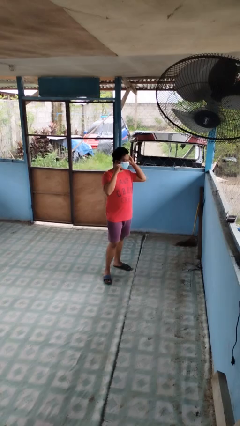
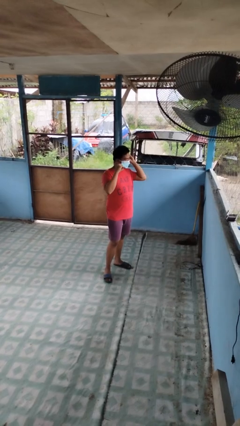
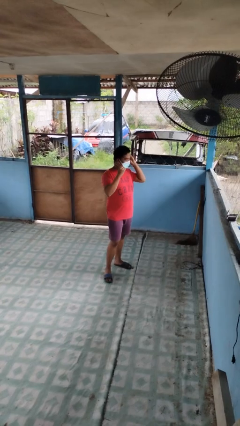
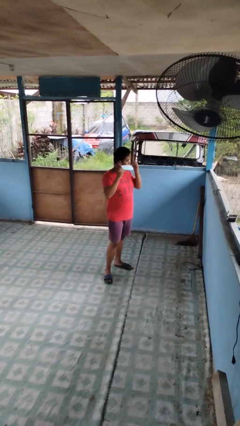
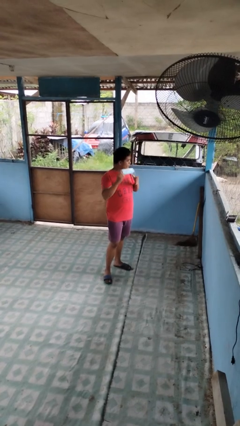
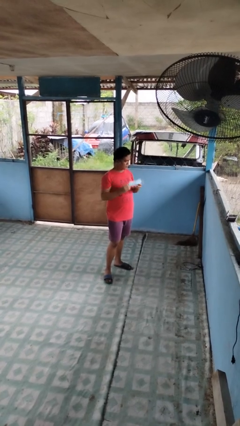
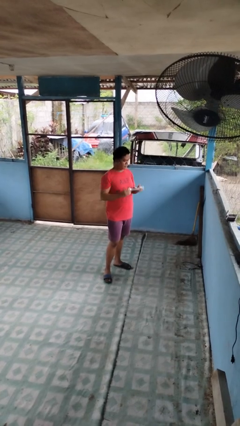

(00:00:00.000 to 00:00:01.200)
person takes off facemask

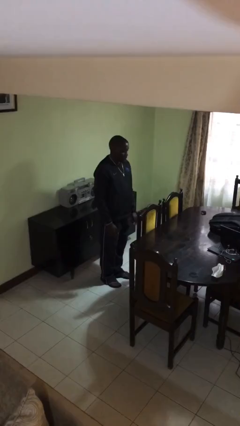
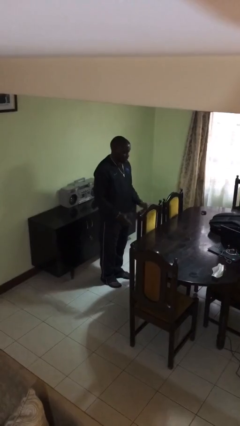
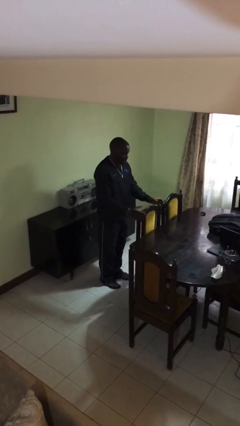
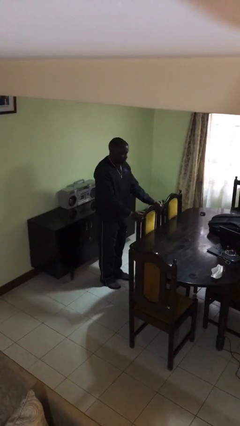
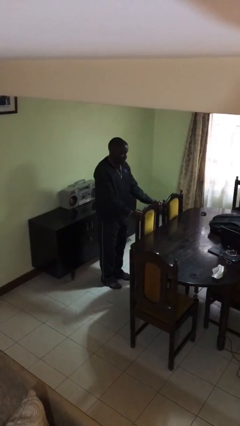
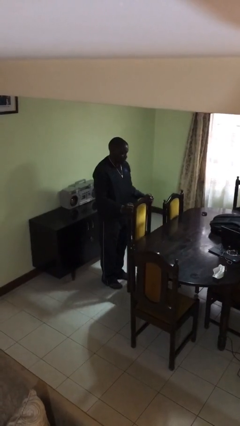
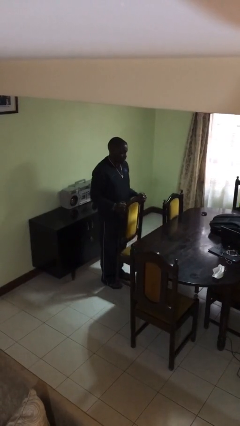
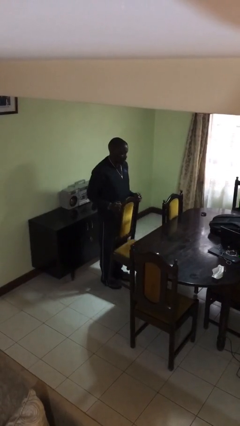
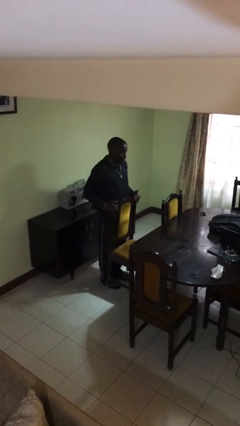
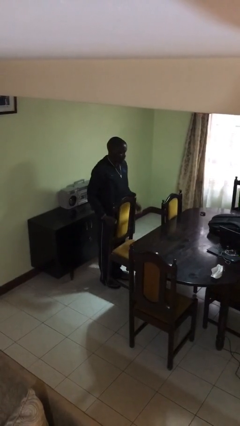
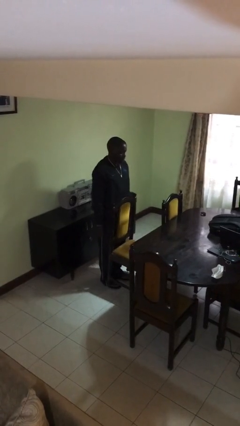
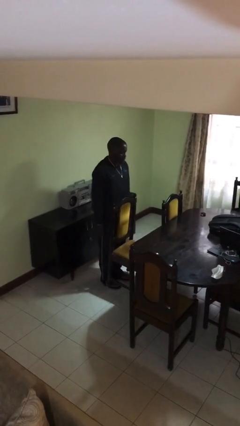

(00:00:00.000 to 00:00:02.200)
person pulls out chair

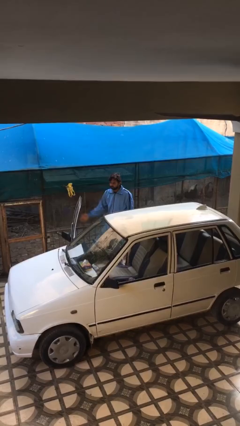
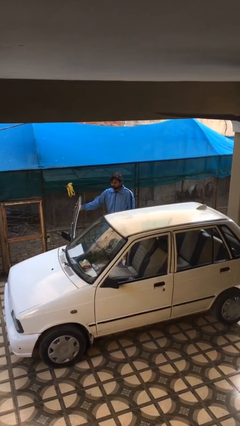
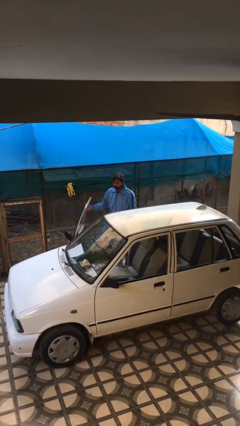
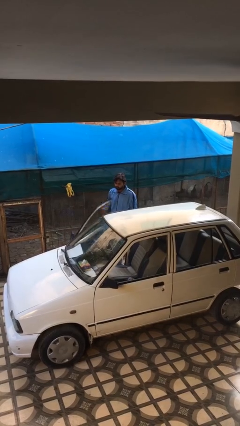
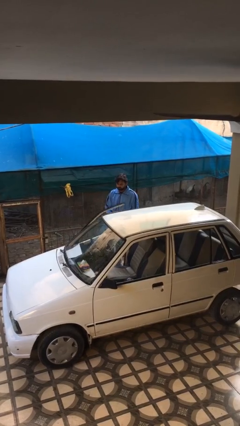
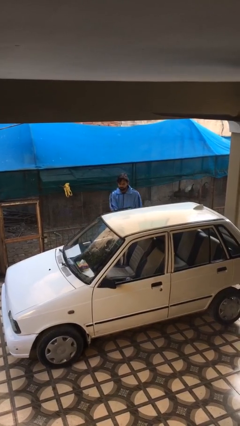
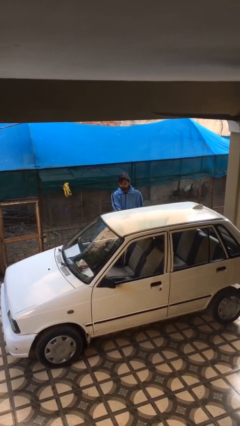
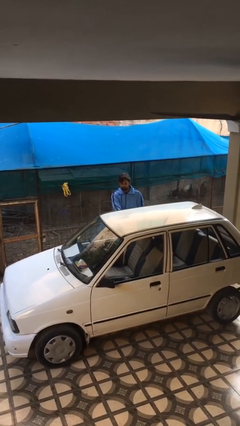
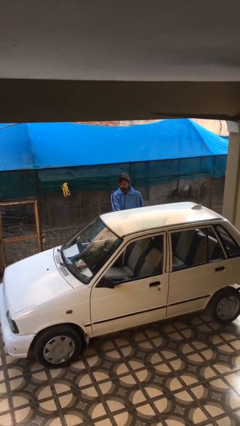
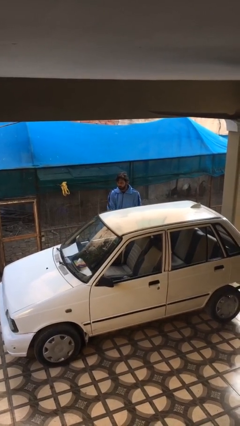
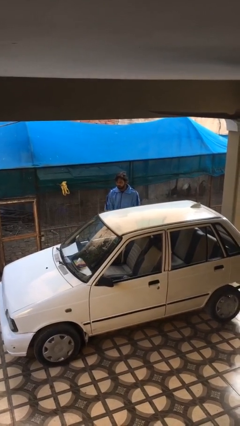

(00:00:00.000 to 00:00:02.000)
person closes car door

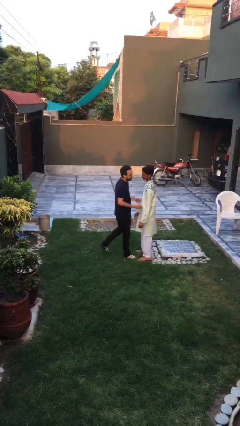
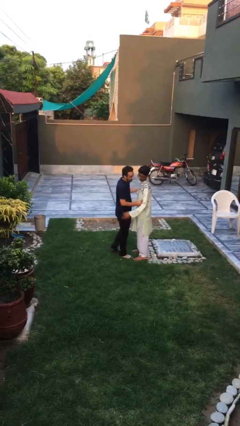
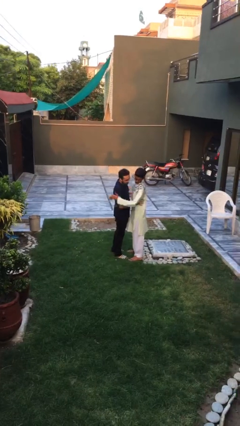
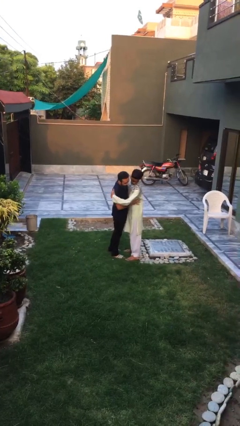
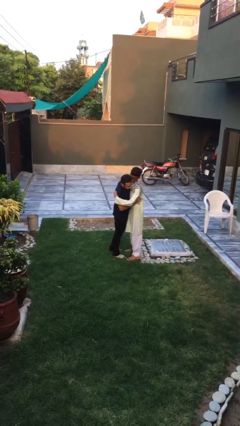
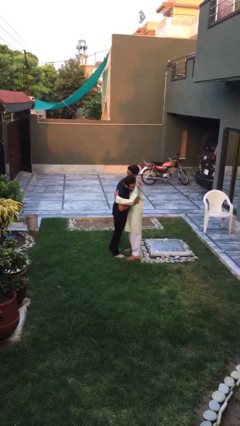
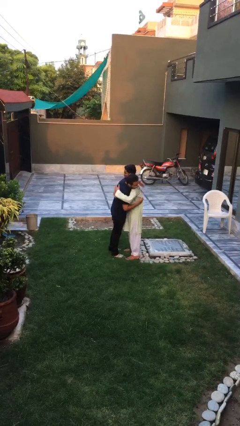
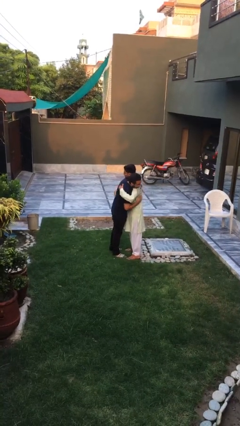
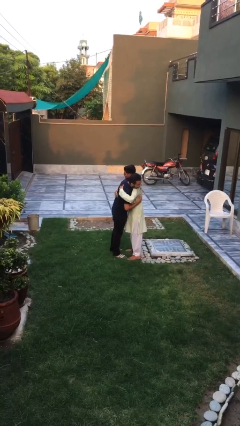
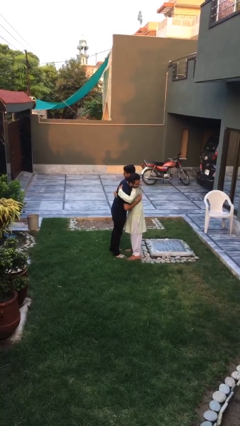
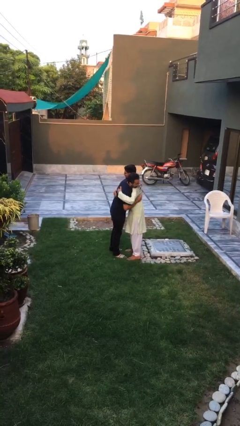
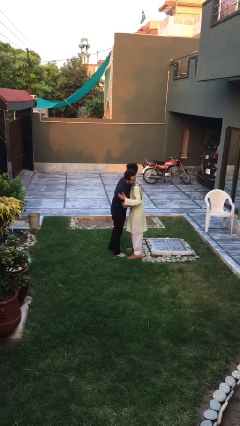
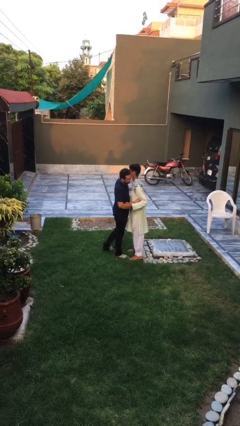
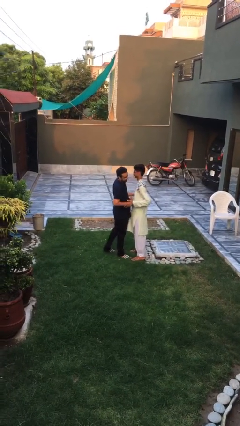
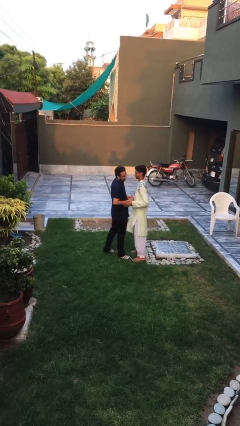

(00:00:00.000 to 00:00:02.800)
person embraces person

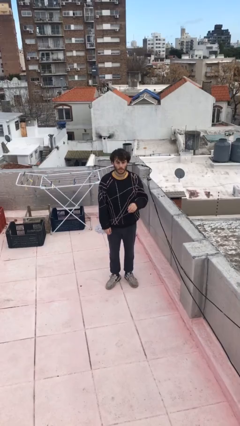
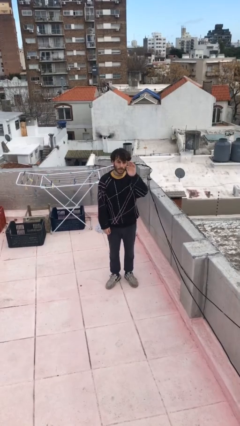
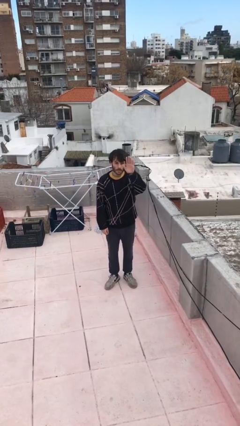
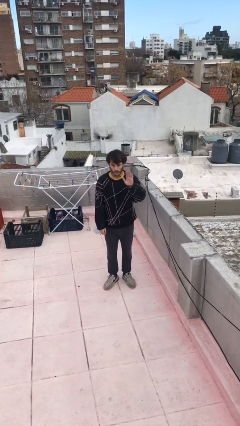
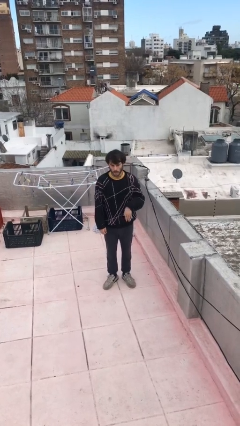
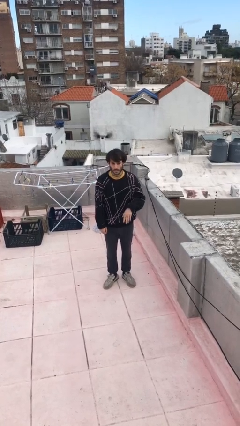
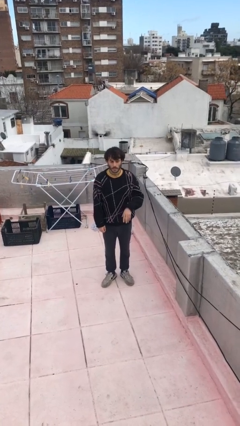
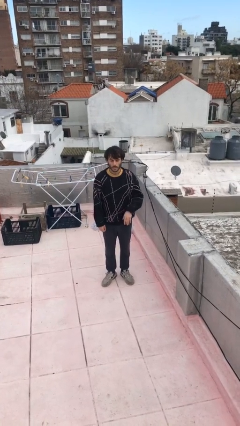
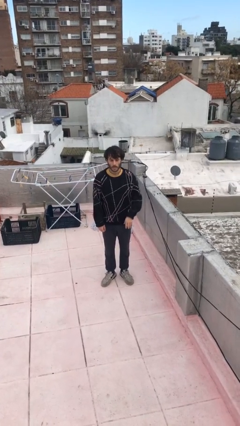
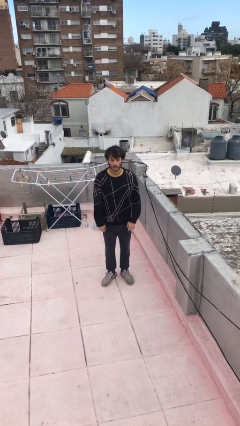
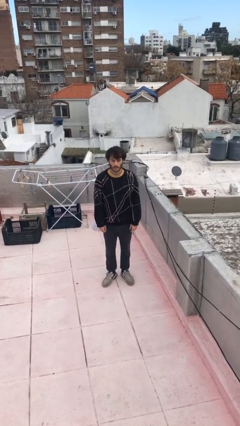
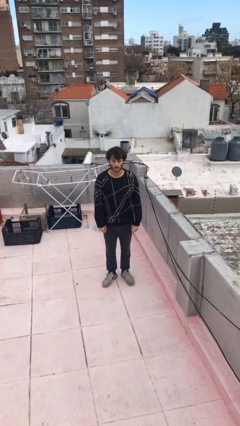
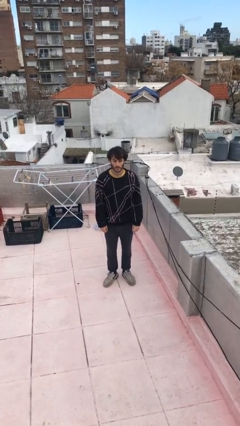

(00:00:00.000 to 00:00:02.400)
person gestures swipe down

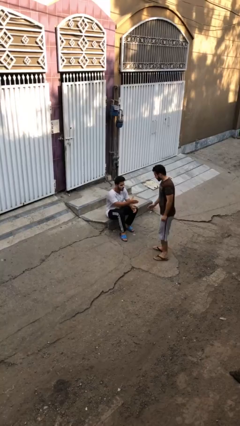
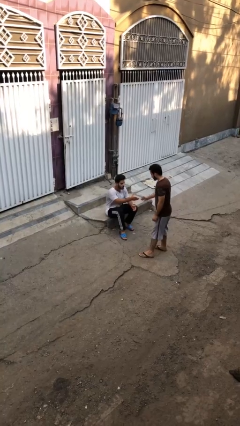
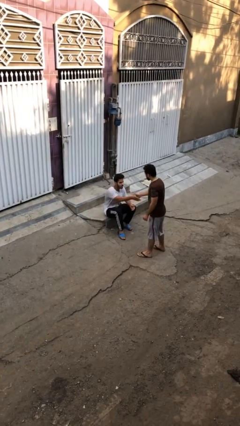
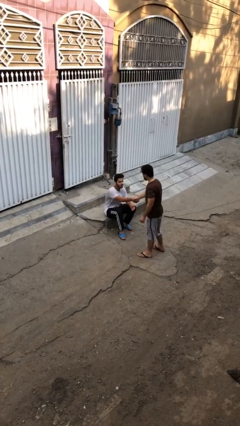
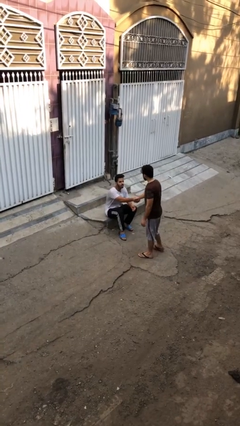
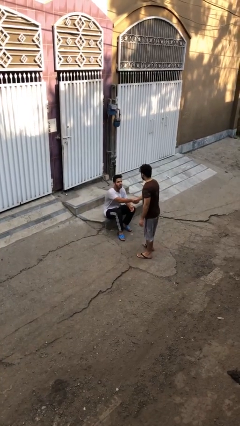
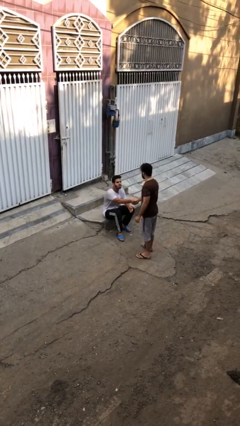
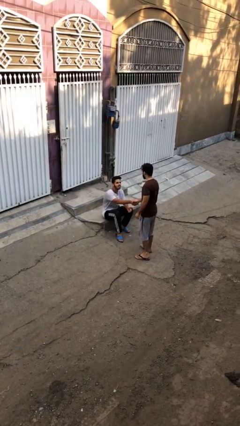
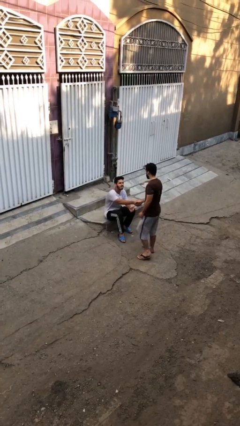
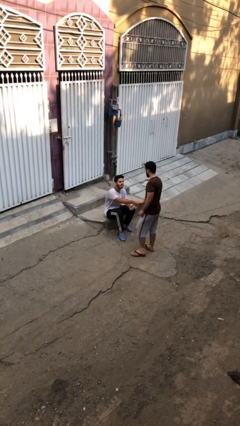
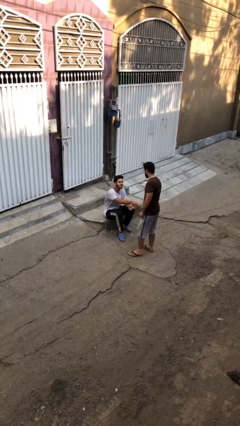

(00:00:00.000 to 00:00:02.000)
person shakes hand

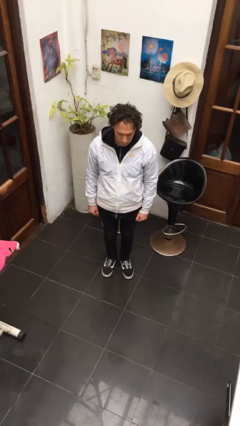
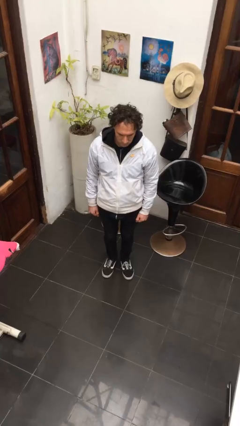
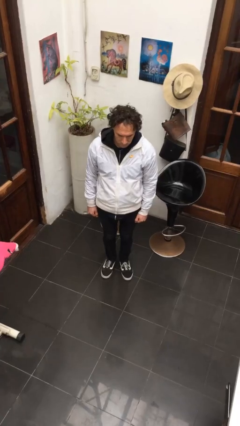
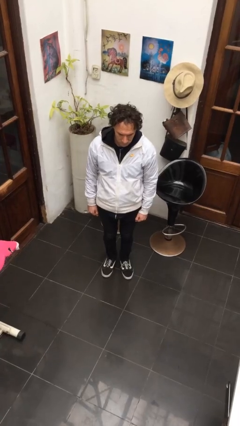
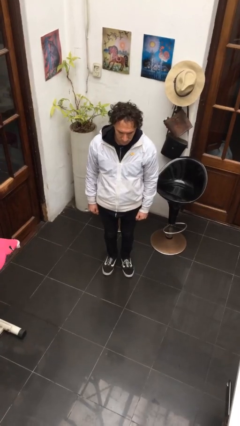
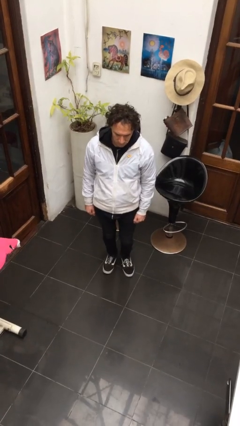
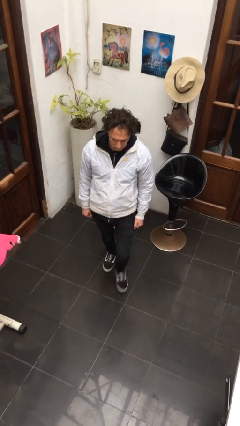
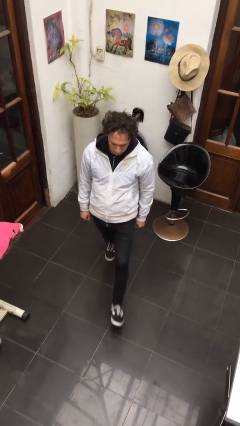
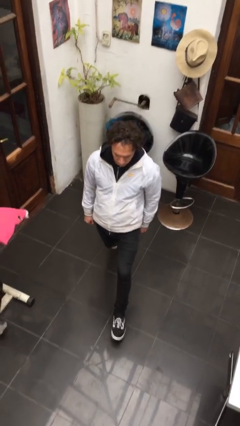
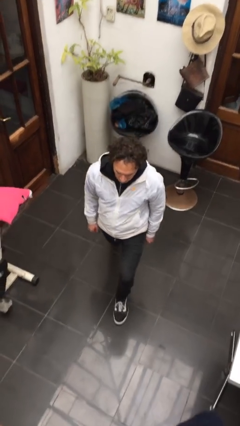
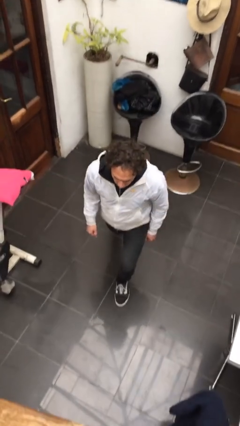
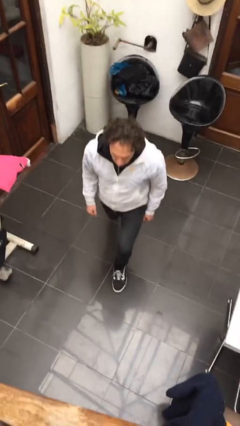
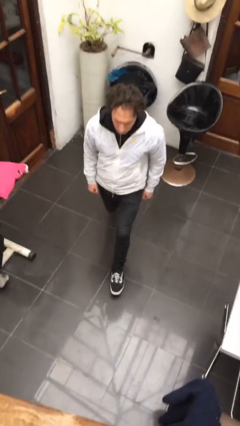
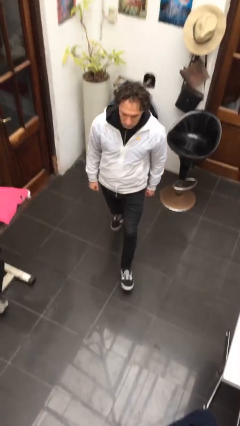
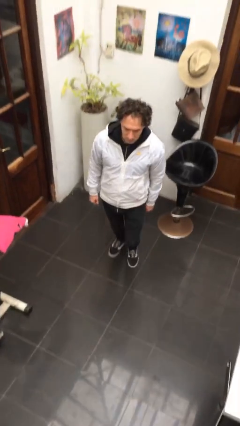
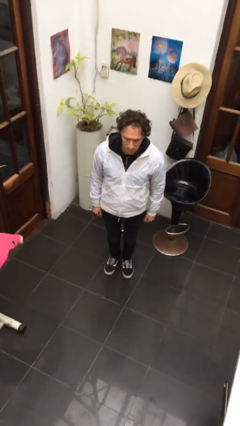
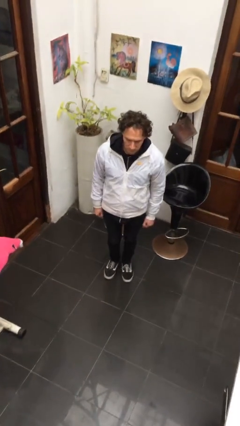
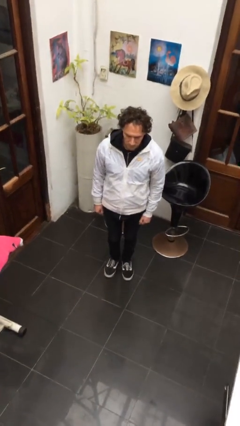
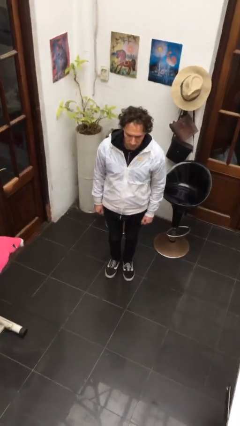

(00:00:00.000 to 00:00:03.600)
person exercises with lunges

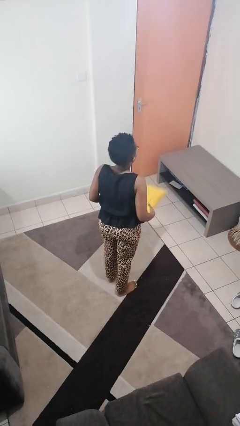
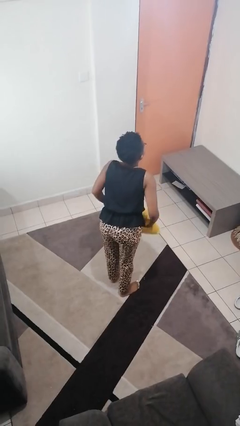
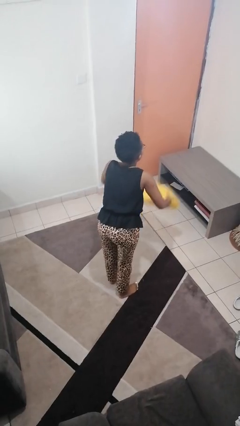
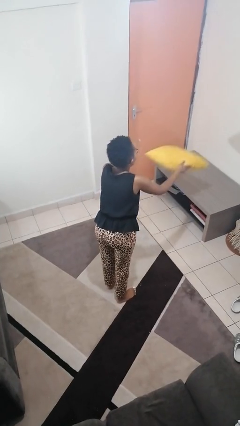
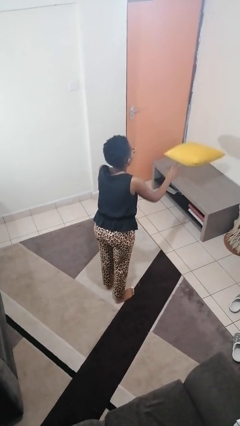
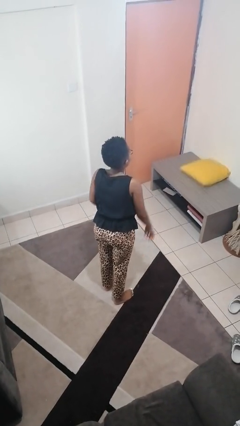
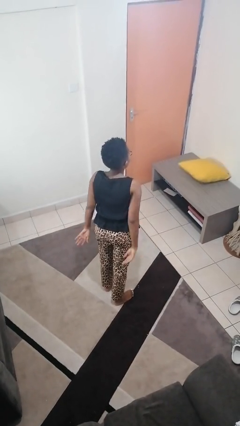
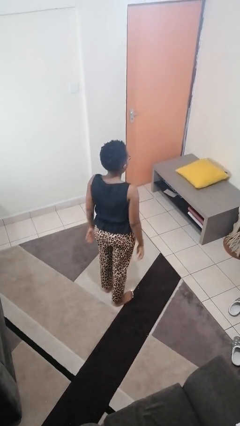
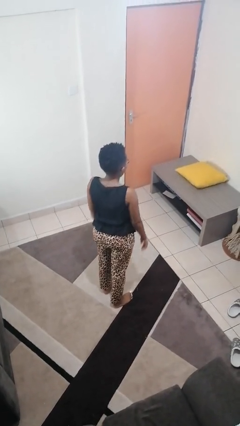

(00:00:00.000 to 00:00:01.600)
person throws object on table
